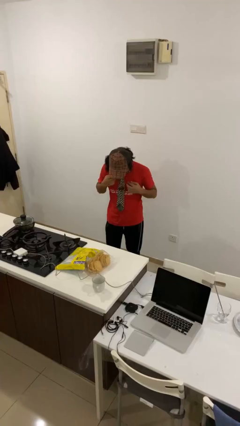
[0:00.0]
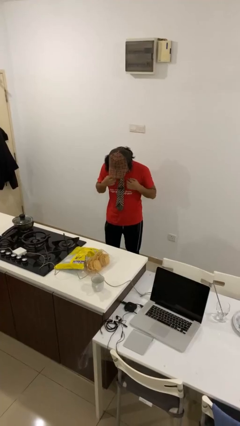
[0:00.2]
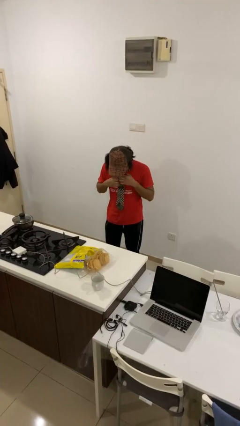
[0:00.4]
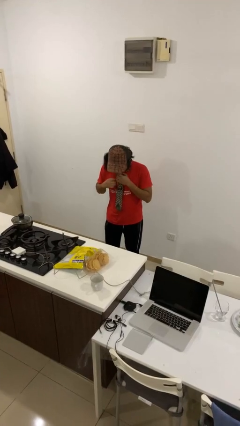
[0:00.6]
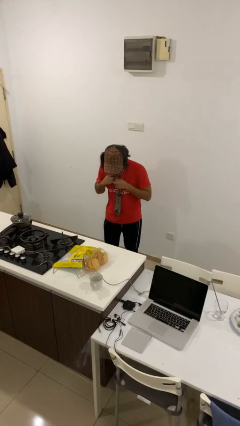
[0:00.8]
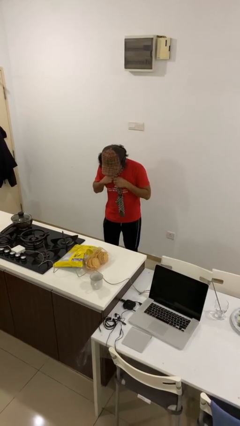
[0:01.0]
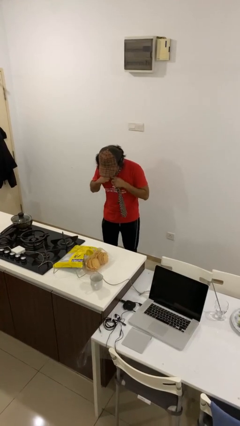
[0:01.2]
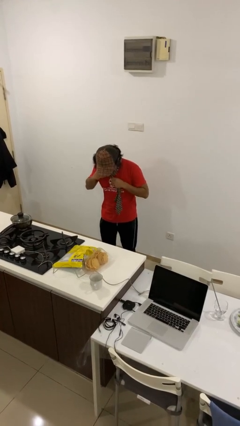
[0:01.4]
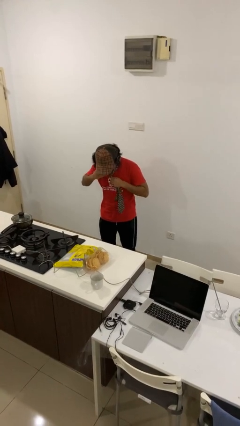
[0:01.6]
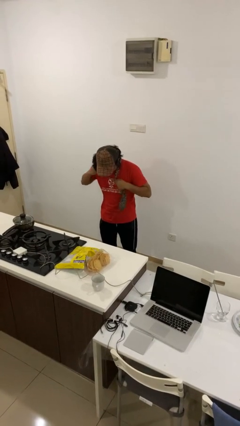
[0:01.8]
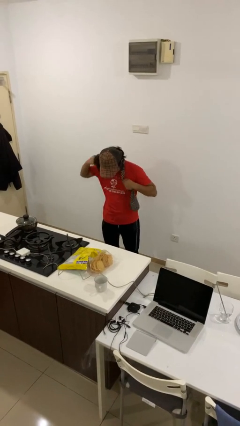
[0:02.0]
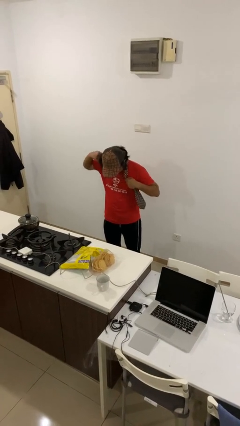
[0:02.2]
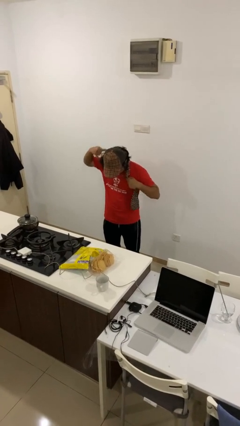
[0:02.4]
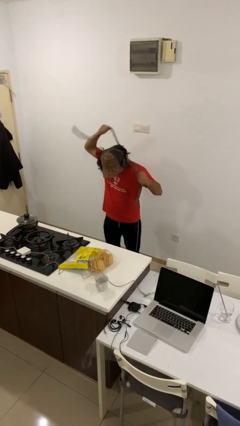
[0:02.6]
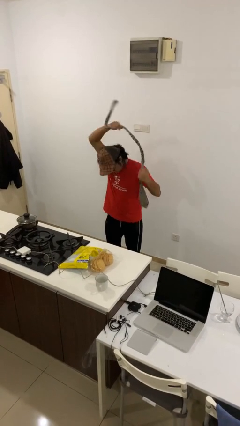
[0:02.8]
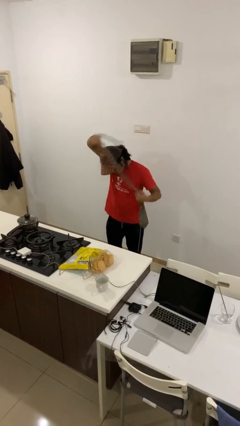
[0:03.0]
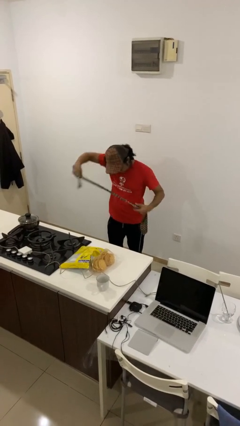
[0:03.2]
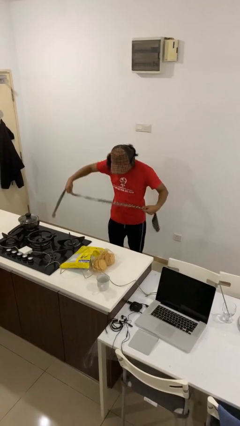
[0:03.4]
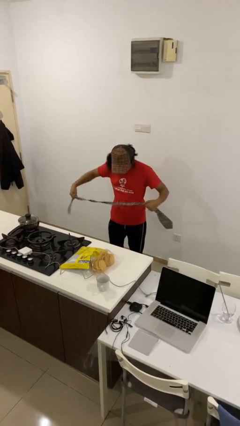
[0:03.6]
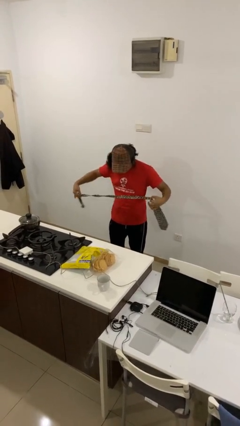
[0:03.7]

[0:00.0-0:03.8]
person takes off necktie

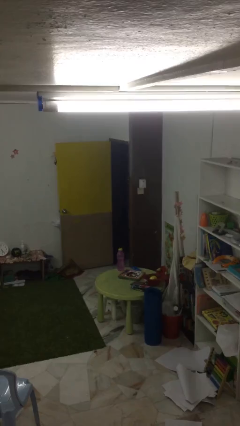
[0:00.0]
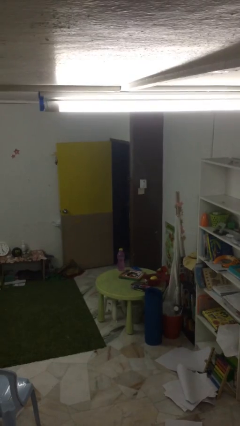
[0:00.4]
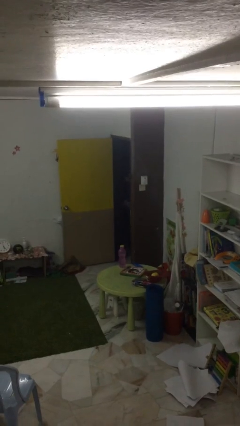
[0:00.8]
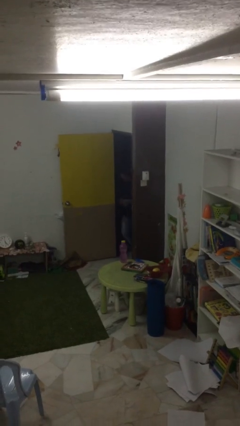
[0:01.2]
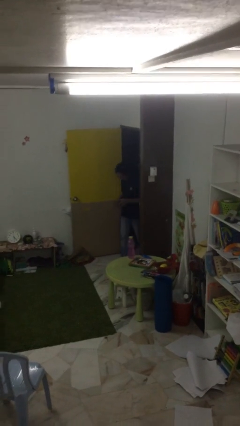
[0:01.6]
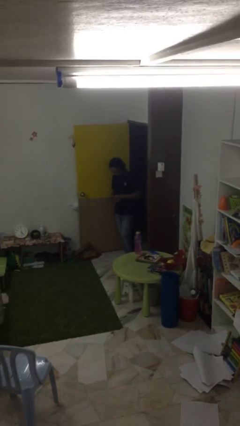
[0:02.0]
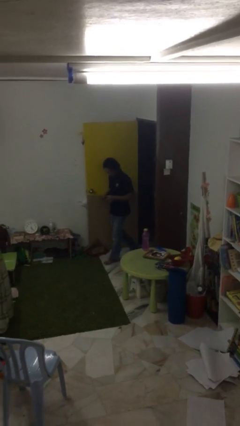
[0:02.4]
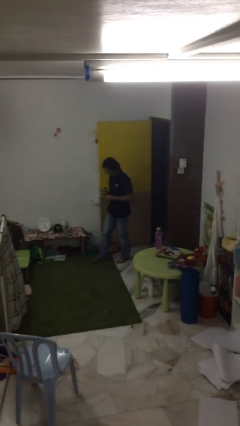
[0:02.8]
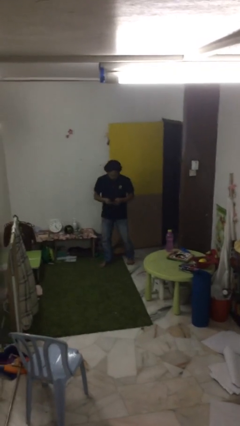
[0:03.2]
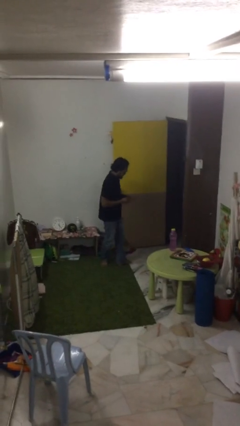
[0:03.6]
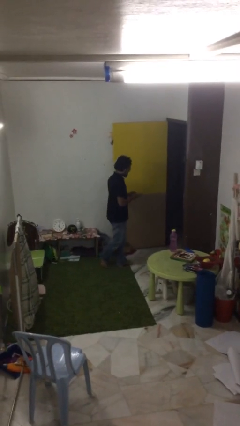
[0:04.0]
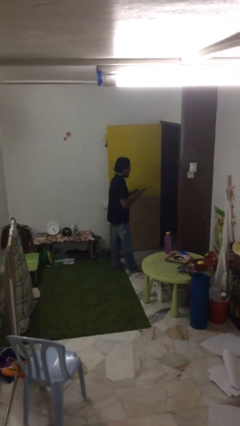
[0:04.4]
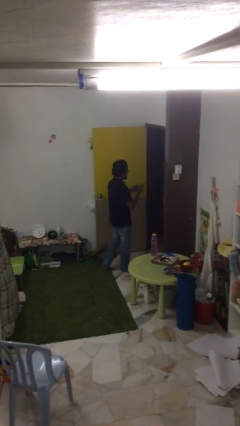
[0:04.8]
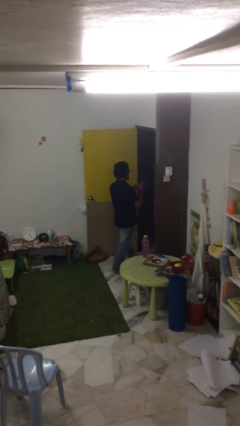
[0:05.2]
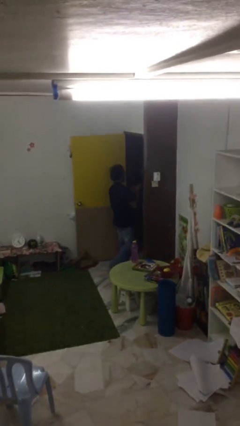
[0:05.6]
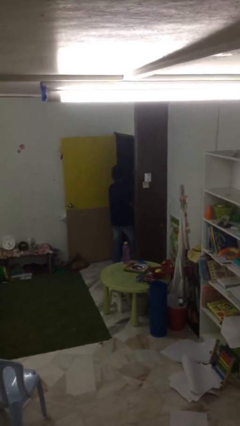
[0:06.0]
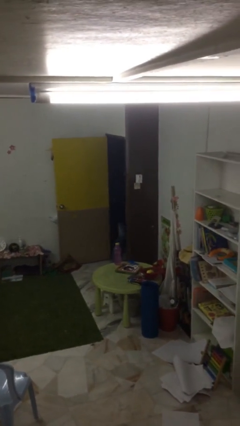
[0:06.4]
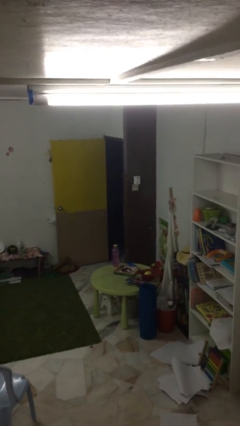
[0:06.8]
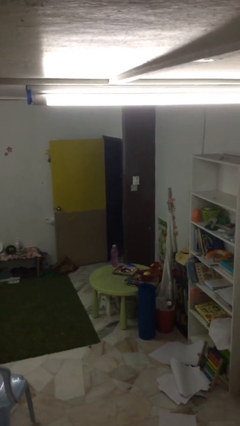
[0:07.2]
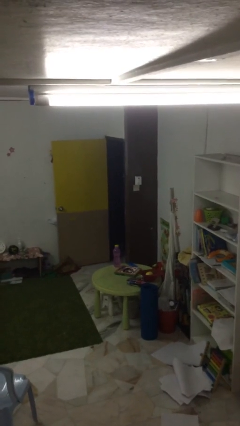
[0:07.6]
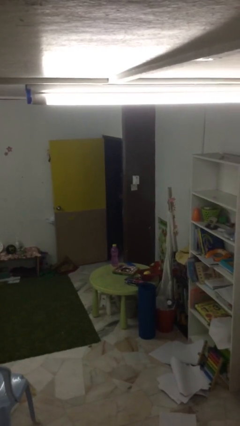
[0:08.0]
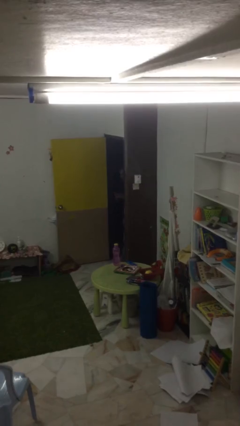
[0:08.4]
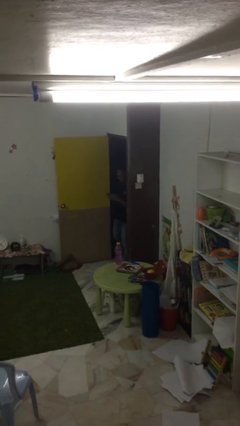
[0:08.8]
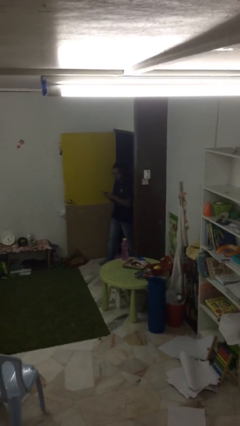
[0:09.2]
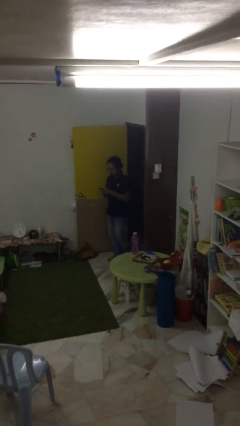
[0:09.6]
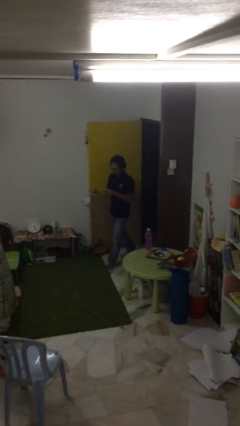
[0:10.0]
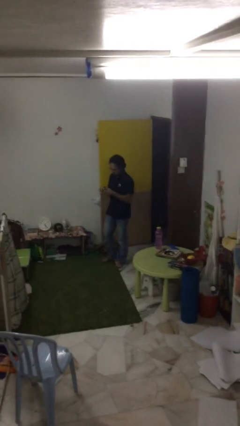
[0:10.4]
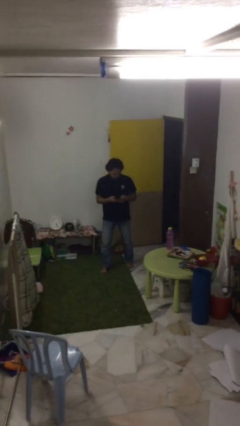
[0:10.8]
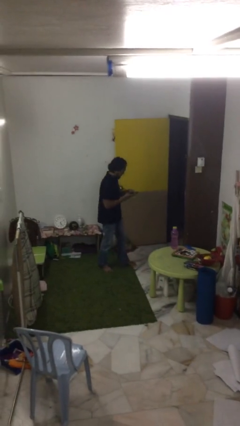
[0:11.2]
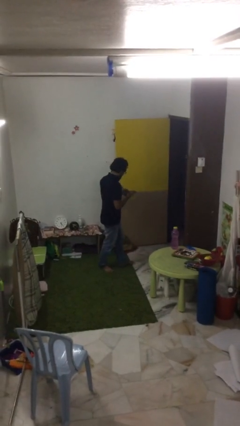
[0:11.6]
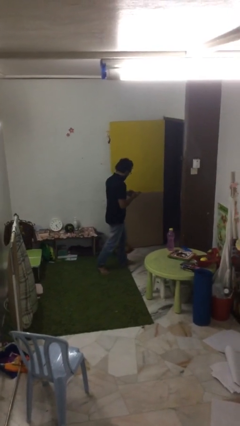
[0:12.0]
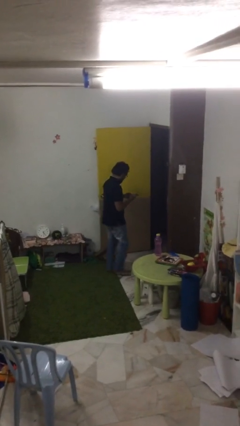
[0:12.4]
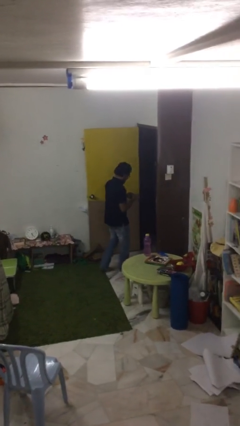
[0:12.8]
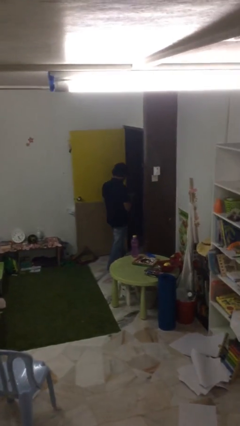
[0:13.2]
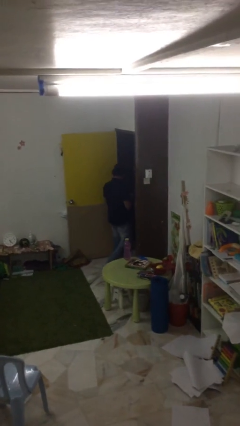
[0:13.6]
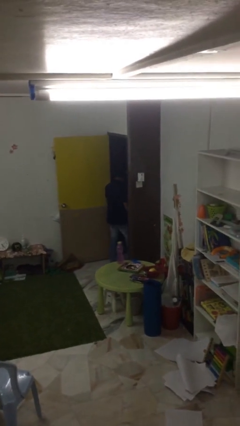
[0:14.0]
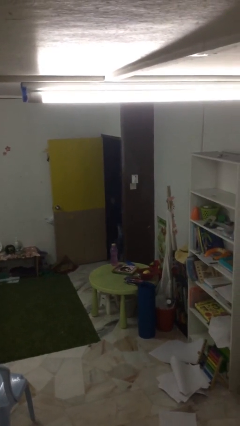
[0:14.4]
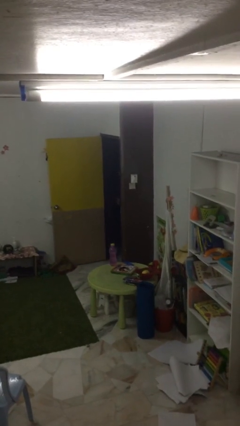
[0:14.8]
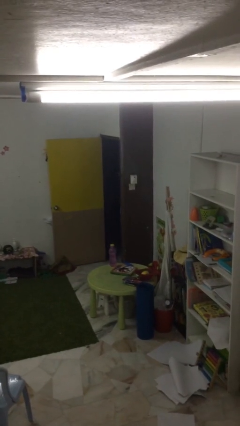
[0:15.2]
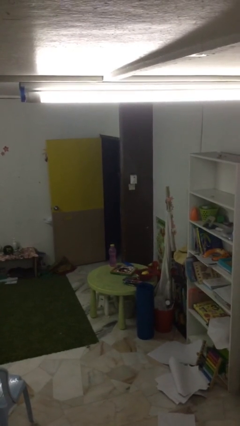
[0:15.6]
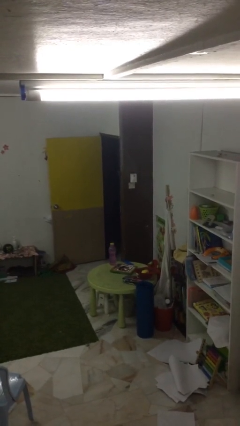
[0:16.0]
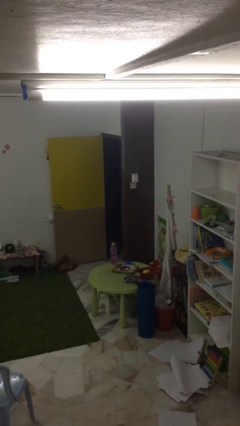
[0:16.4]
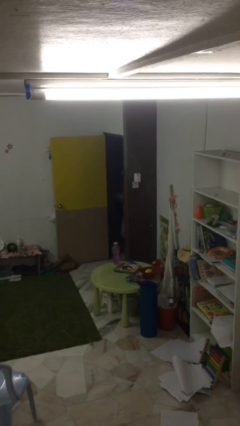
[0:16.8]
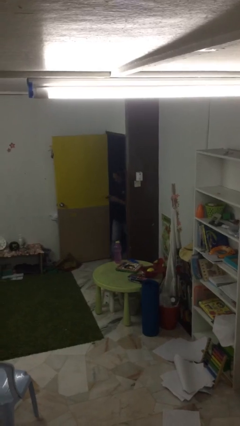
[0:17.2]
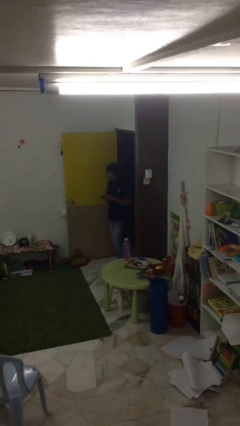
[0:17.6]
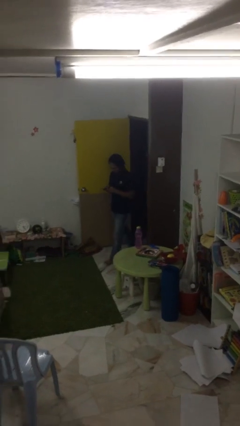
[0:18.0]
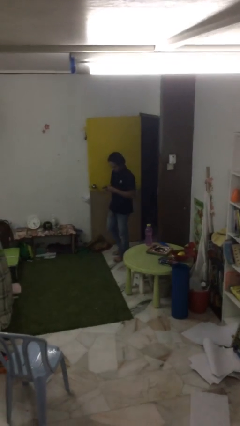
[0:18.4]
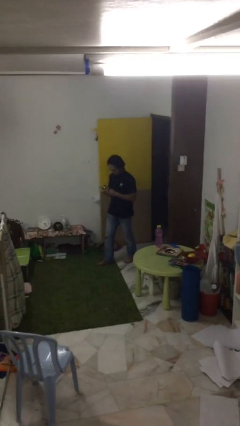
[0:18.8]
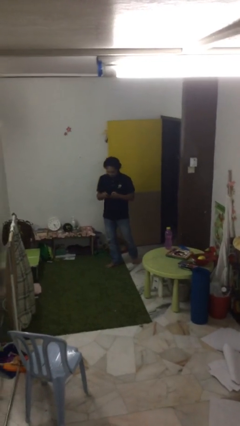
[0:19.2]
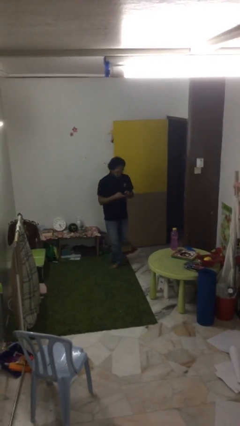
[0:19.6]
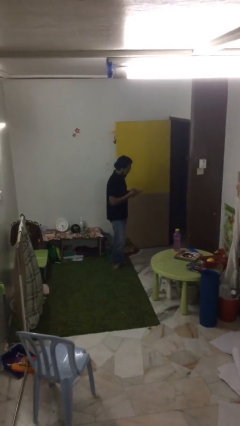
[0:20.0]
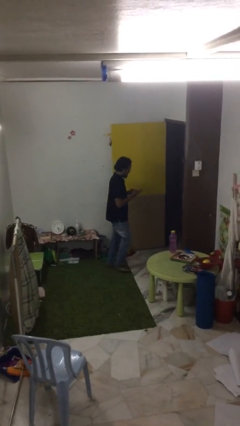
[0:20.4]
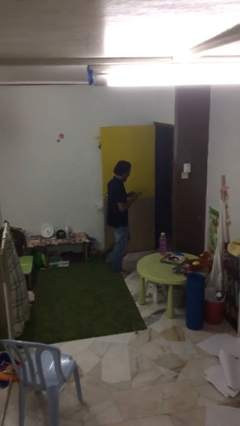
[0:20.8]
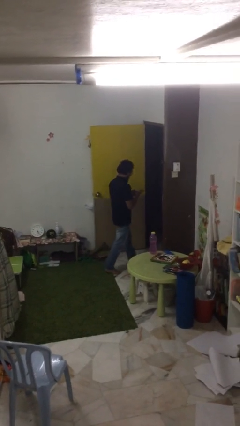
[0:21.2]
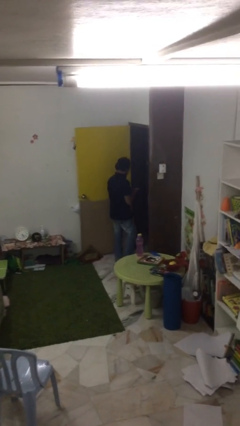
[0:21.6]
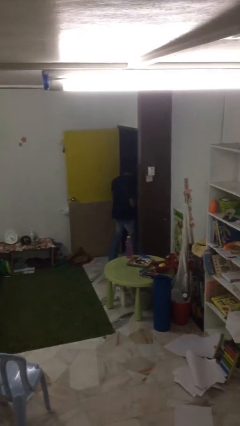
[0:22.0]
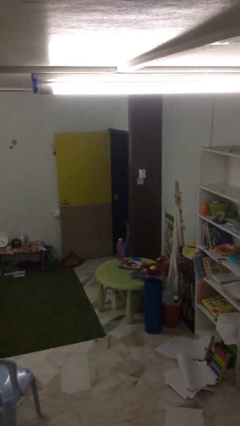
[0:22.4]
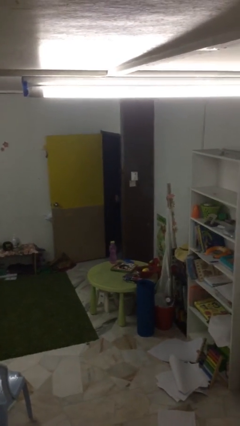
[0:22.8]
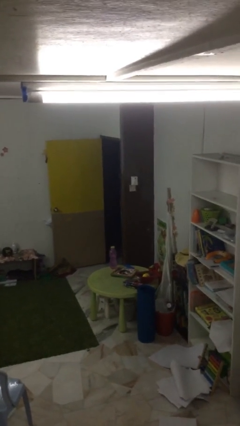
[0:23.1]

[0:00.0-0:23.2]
person texts on phone

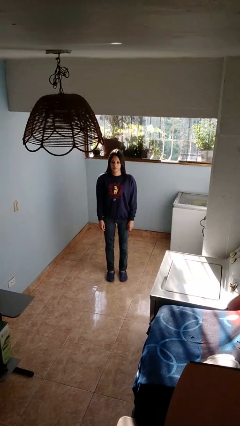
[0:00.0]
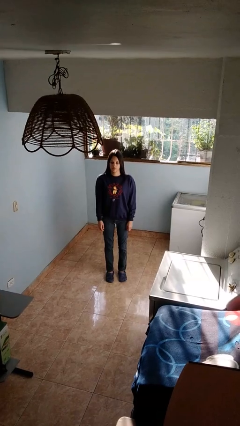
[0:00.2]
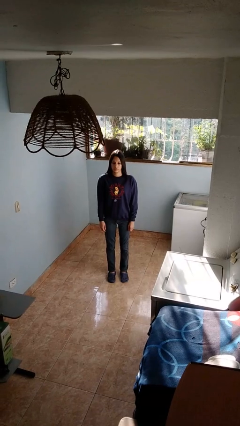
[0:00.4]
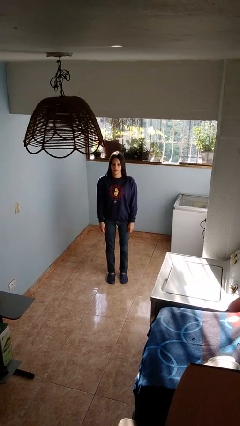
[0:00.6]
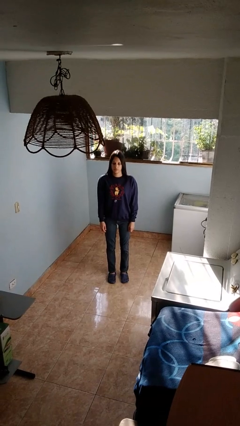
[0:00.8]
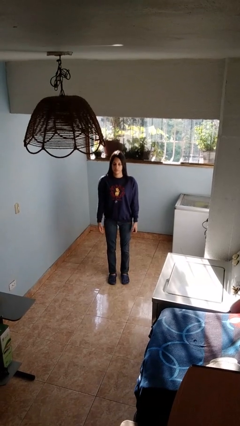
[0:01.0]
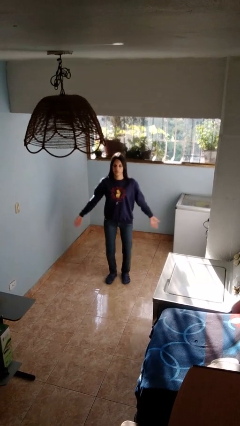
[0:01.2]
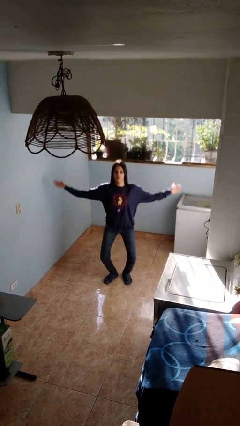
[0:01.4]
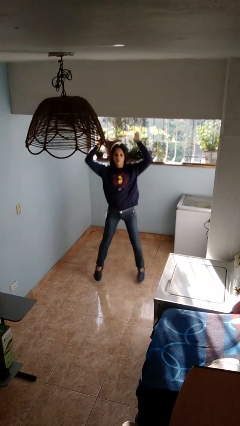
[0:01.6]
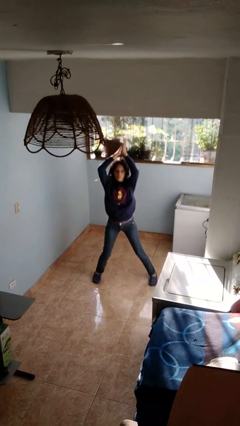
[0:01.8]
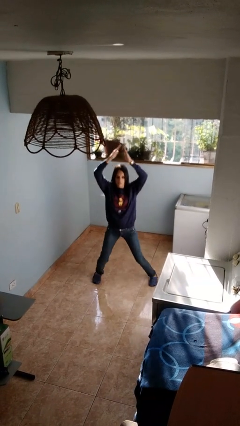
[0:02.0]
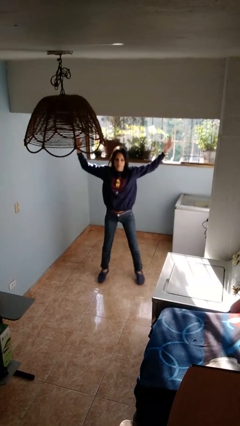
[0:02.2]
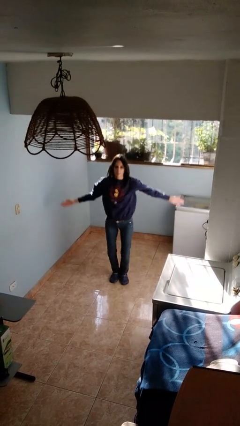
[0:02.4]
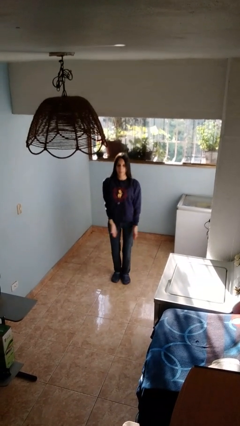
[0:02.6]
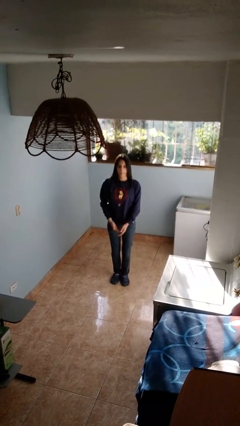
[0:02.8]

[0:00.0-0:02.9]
person exercises with jumping jacks
